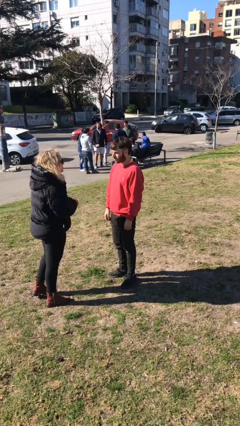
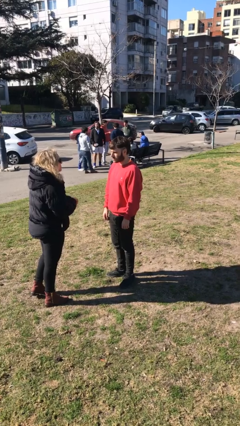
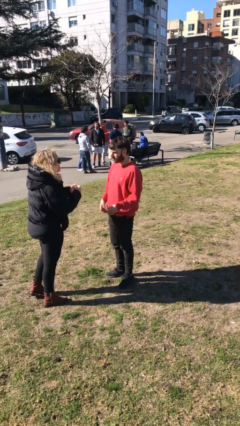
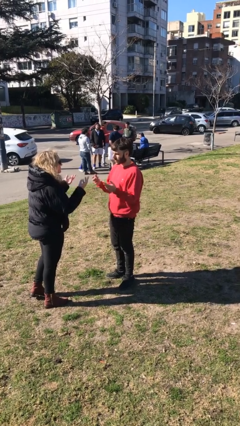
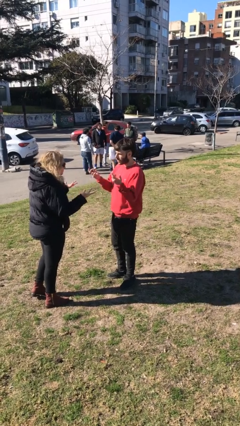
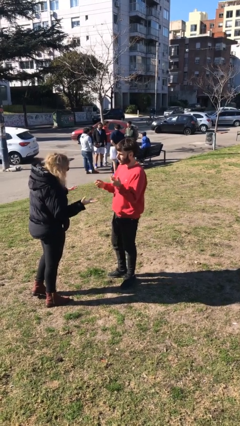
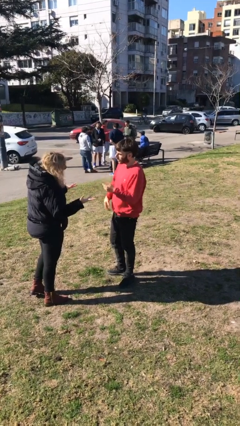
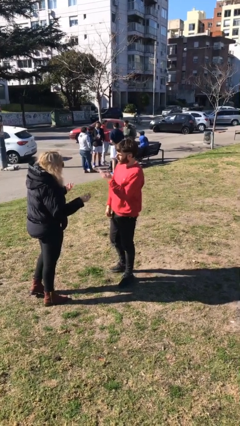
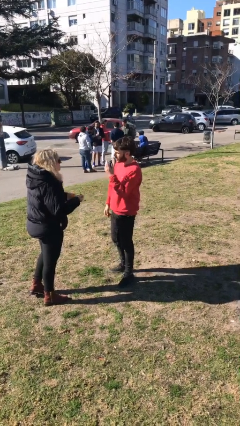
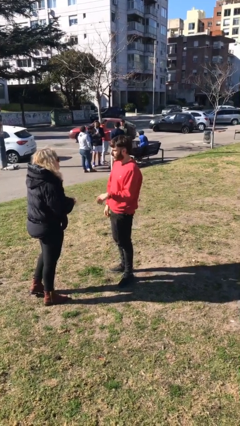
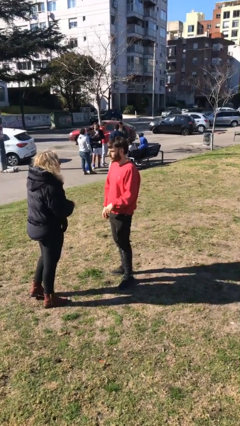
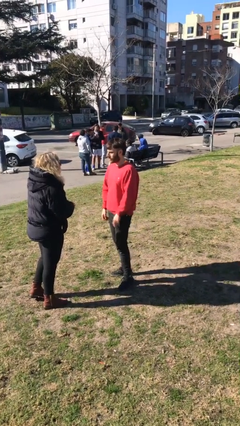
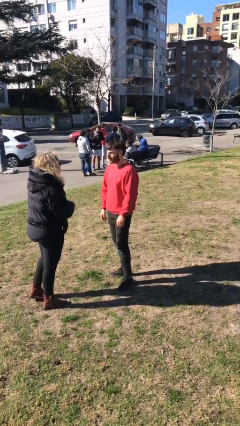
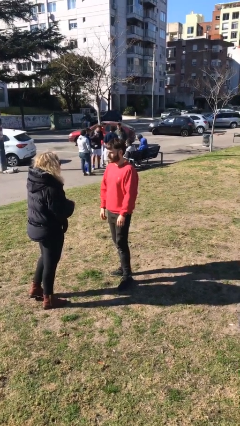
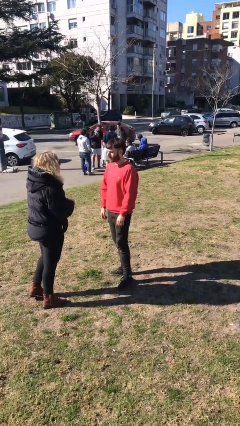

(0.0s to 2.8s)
person talks to person

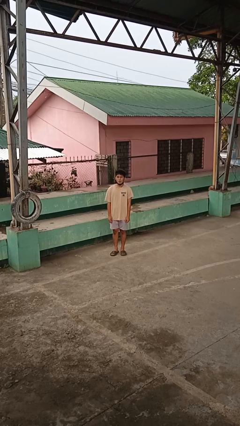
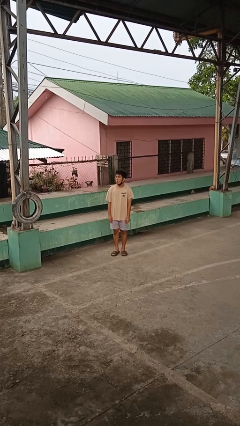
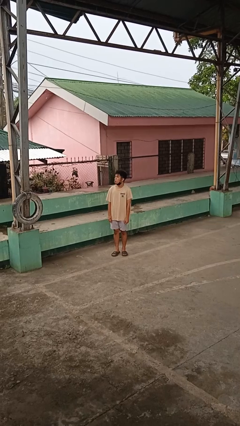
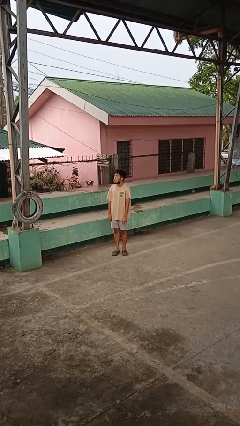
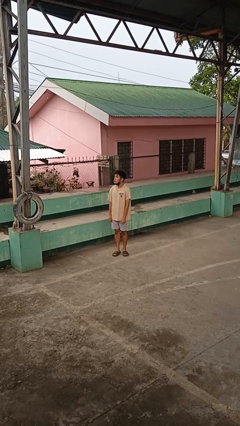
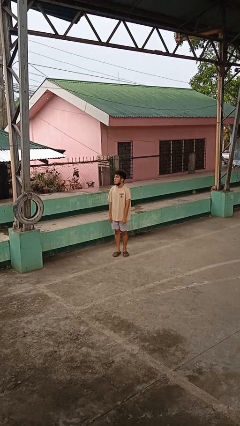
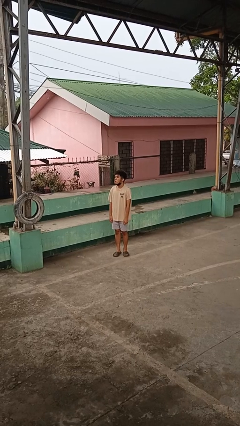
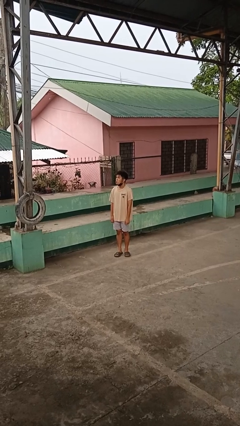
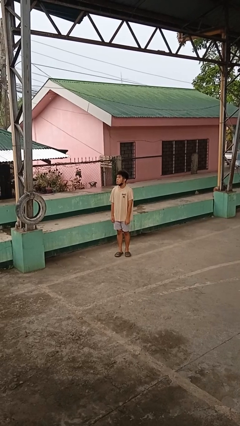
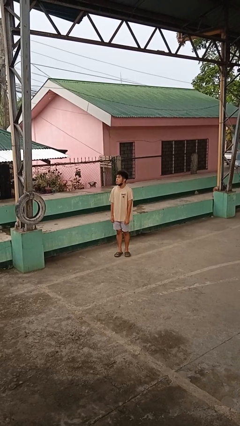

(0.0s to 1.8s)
person sticks out tongue

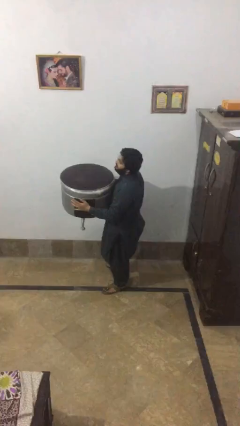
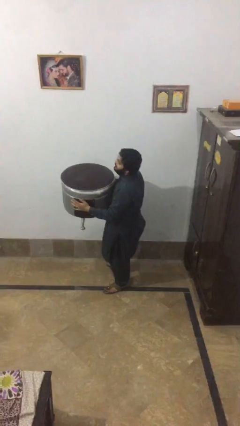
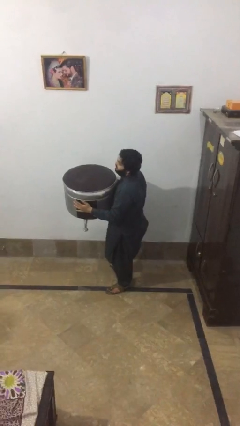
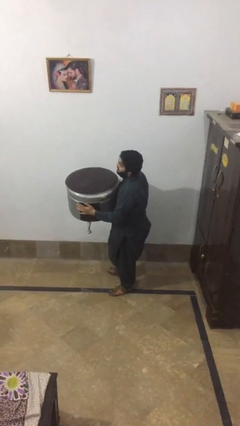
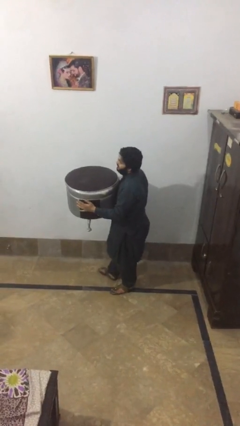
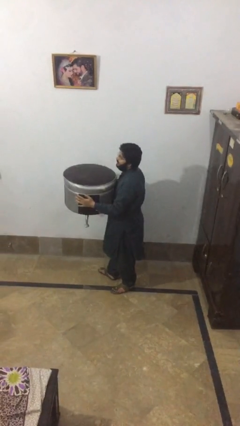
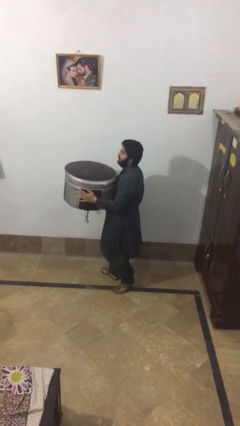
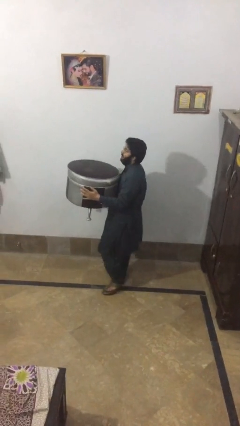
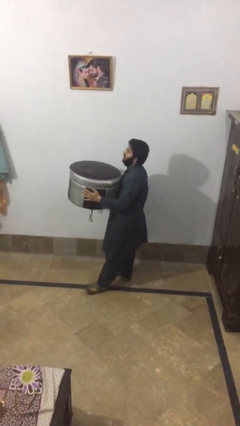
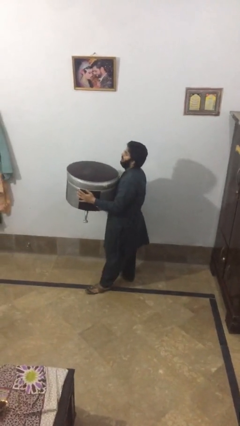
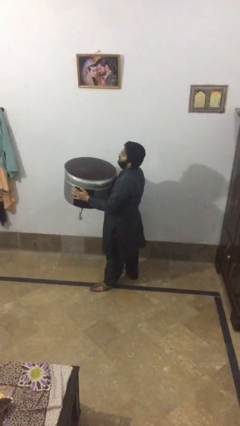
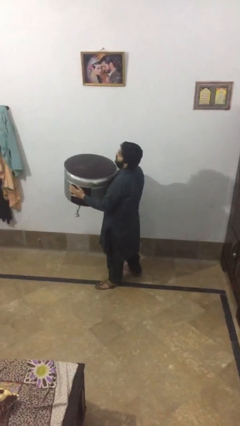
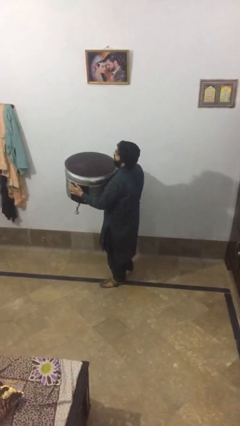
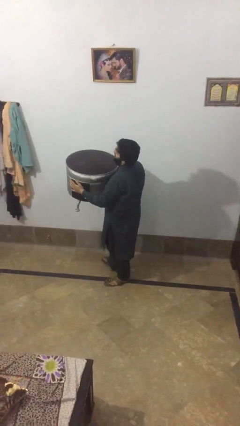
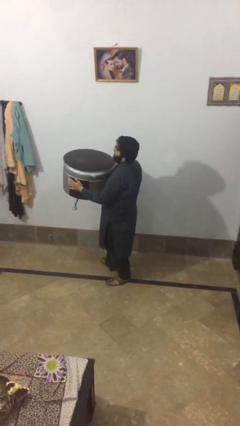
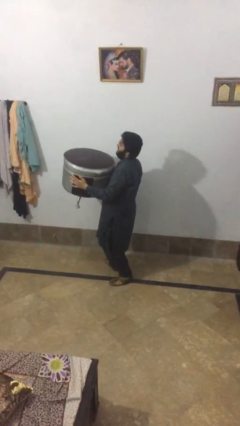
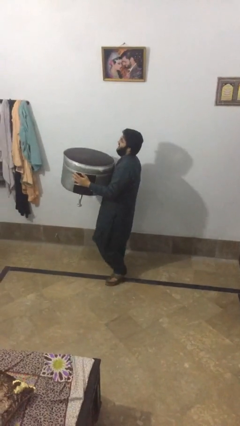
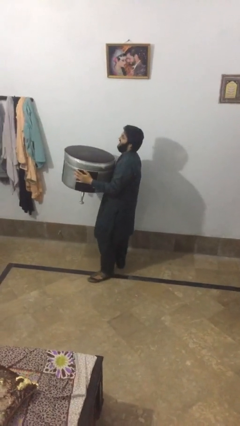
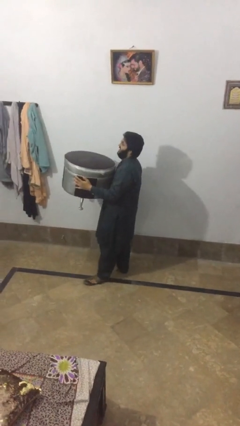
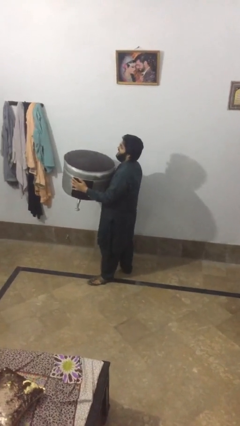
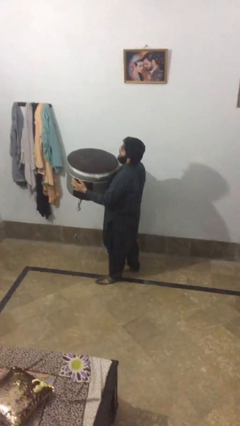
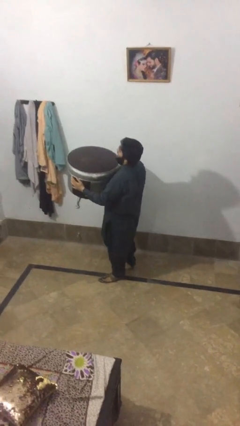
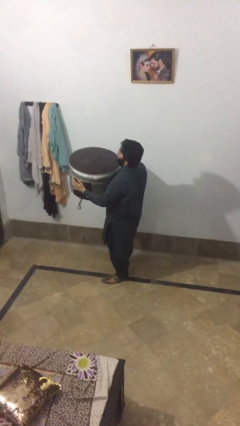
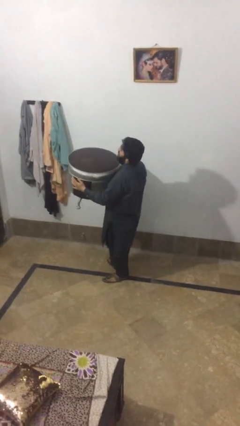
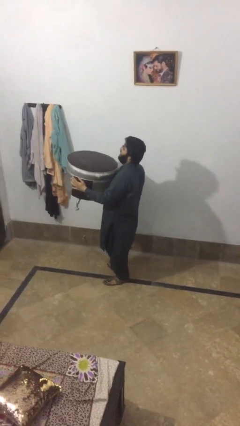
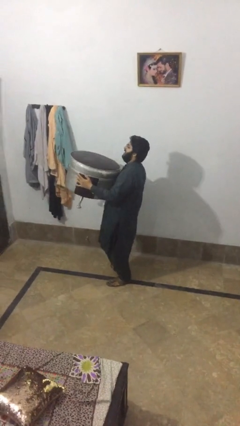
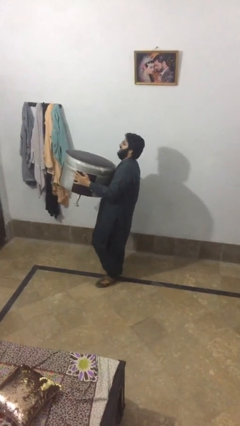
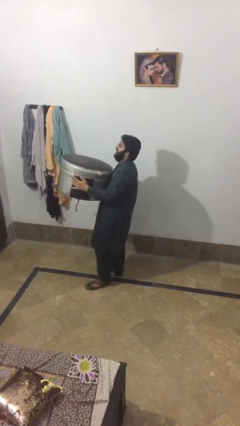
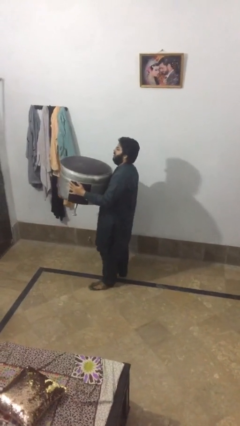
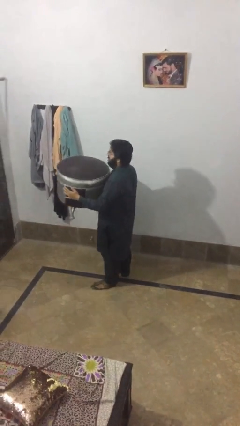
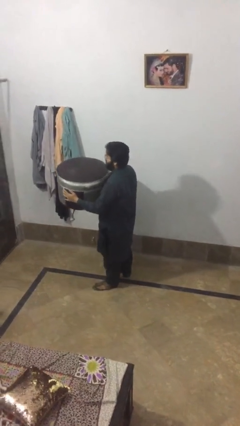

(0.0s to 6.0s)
person carries heavy object

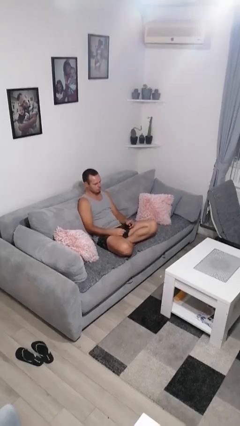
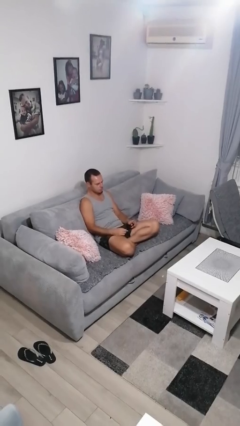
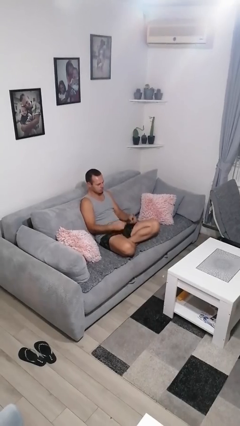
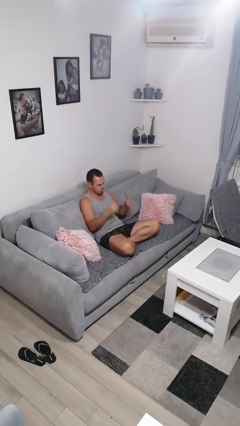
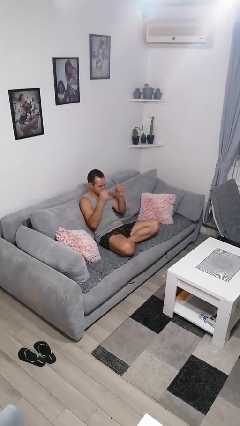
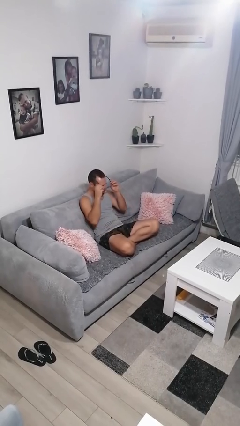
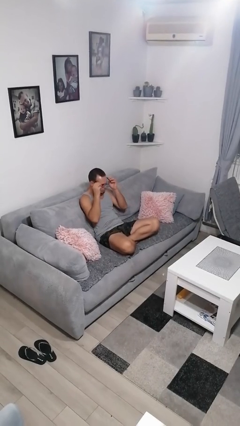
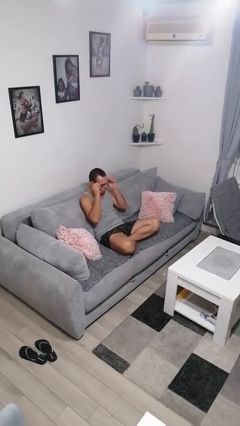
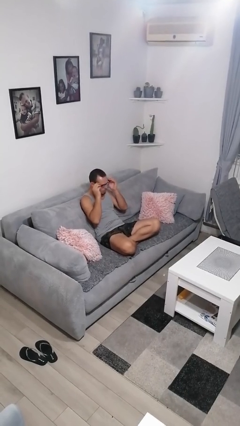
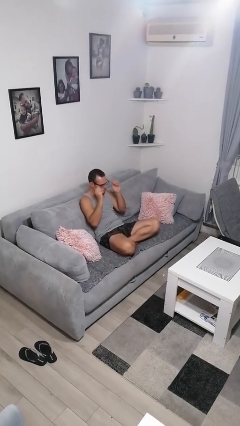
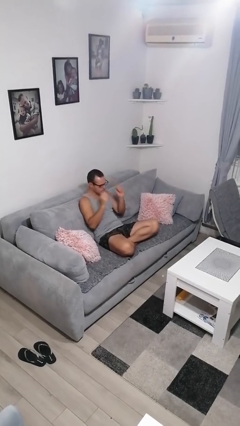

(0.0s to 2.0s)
person puts on glasses

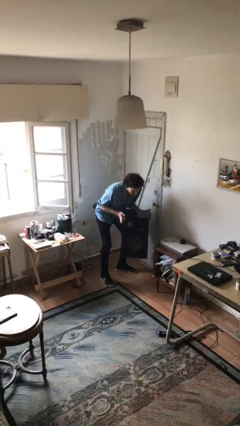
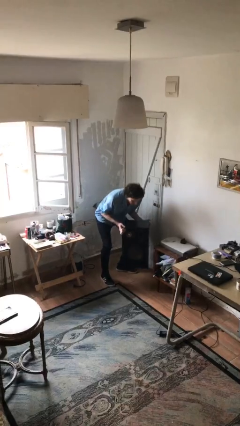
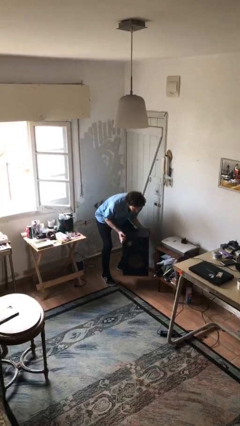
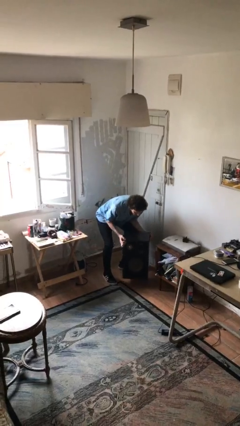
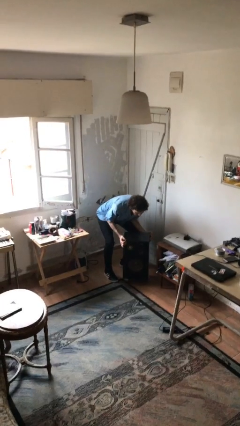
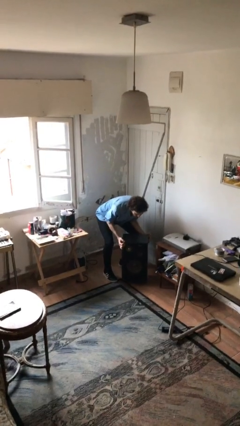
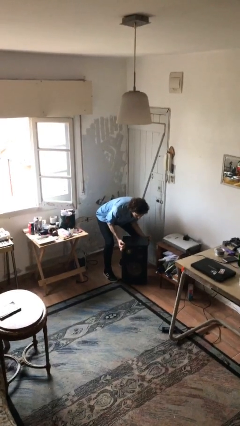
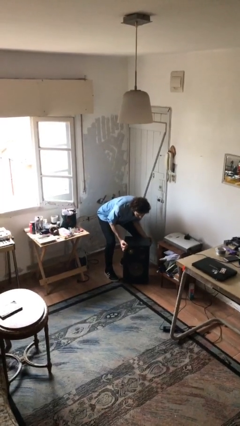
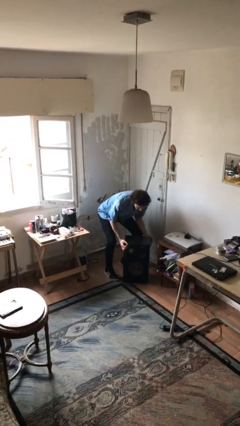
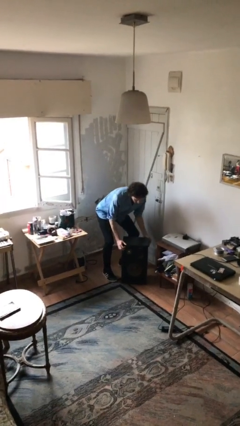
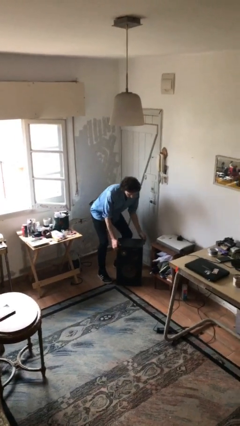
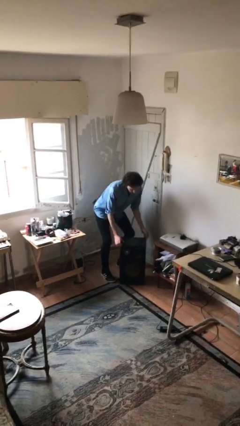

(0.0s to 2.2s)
person puts down object on floor

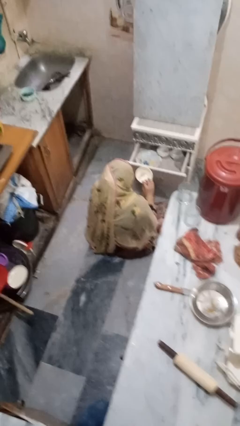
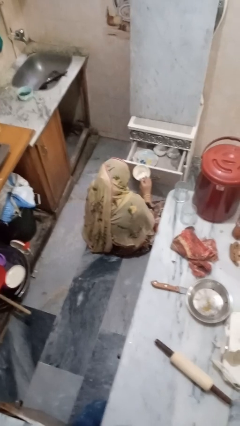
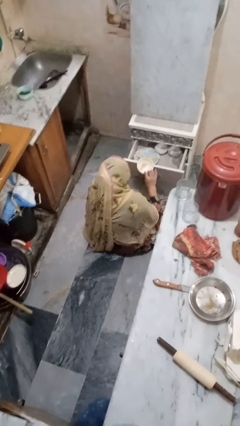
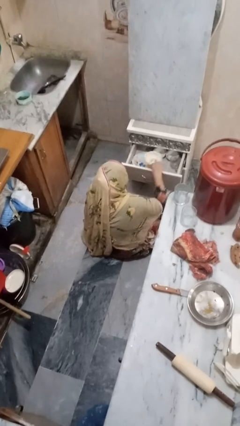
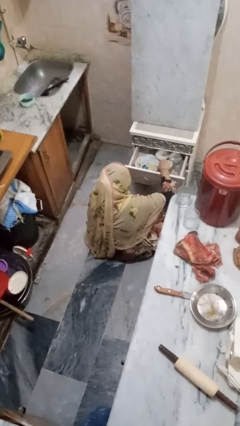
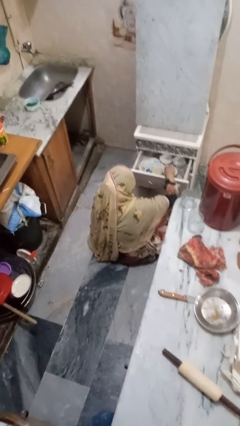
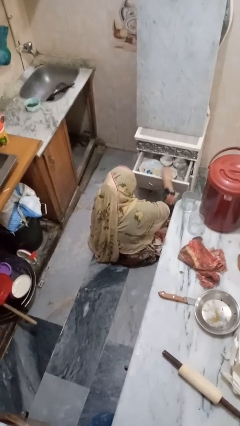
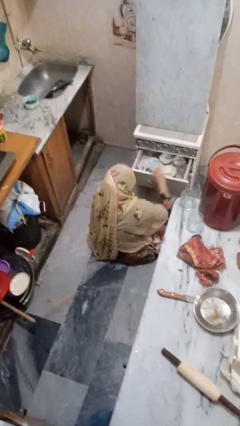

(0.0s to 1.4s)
person puts object into kitchen drawer

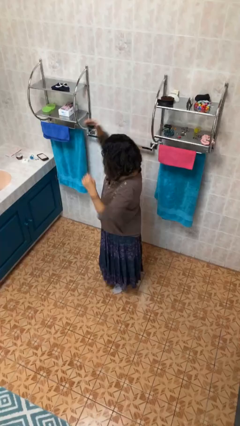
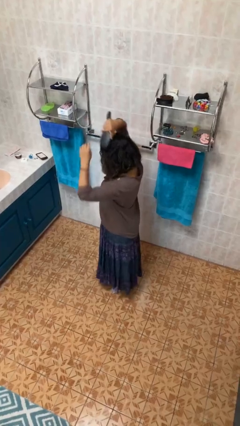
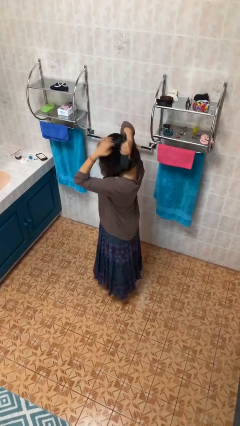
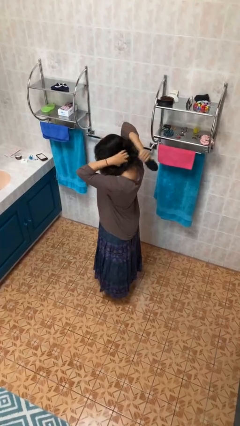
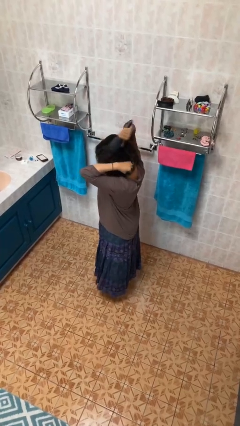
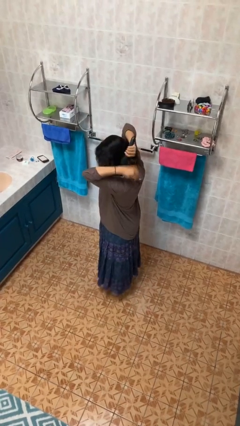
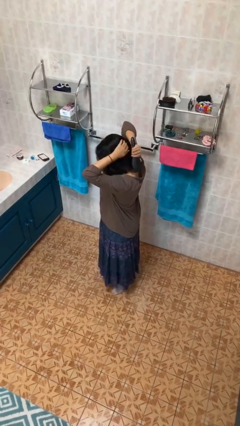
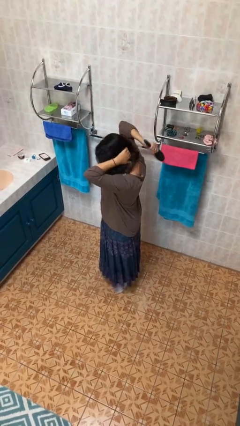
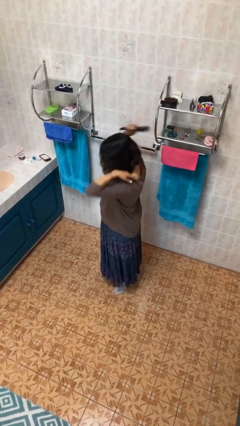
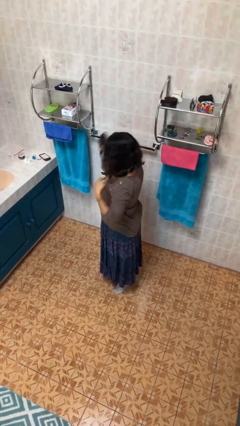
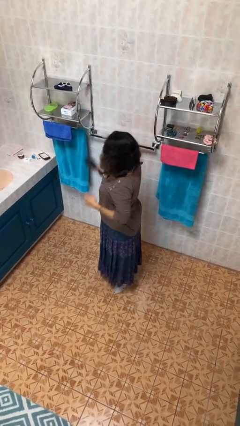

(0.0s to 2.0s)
person brushes hair
